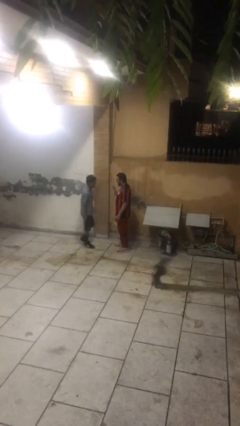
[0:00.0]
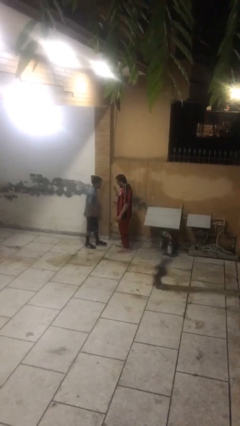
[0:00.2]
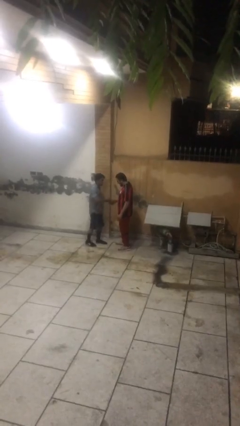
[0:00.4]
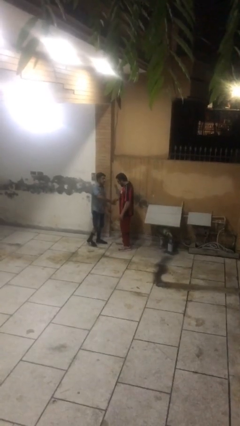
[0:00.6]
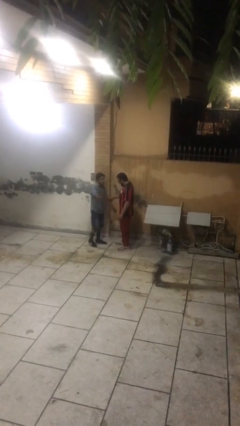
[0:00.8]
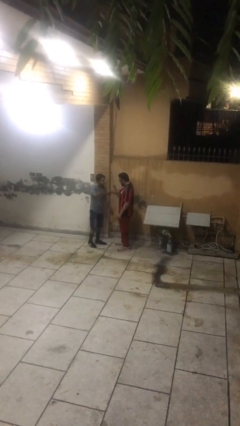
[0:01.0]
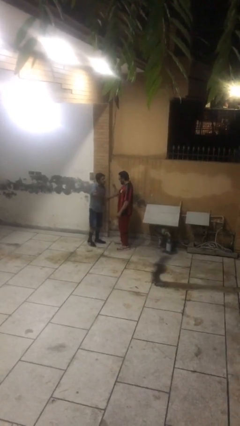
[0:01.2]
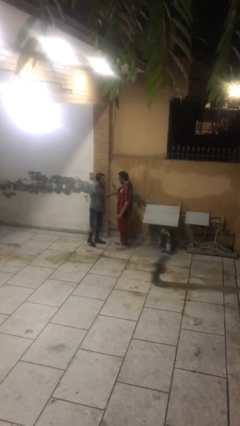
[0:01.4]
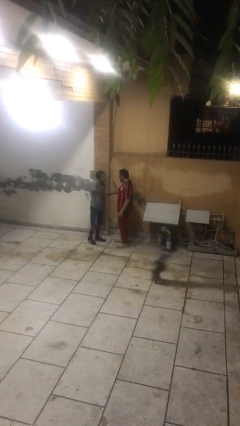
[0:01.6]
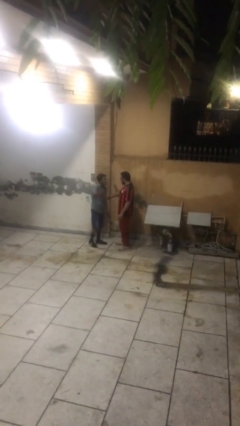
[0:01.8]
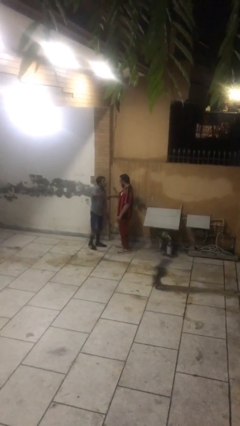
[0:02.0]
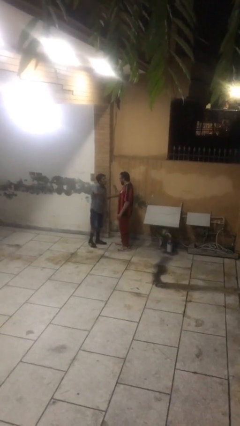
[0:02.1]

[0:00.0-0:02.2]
person shakes hand

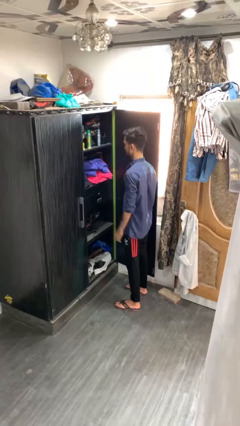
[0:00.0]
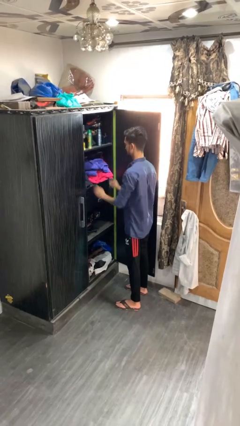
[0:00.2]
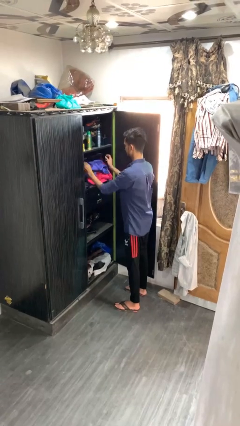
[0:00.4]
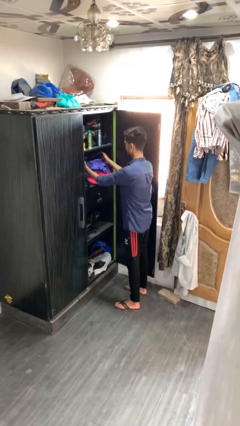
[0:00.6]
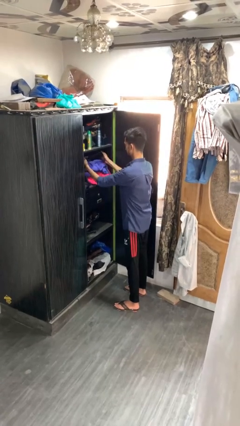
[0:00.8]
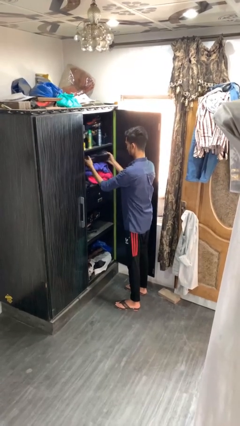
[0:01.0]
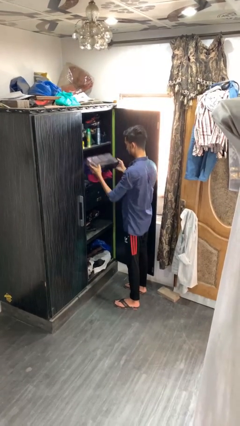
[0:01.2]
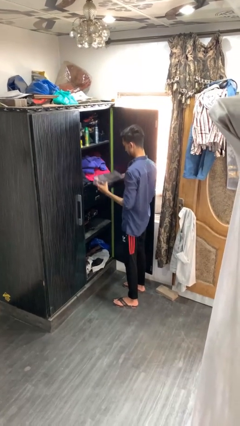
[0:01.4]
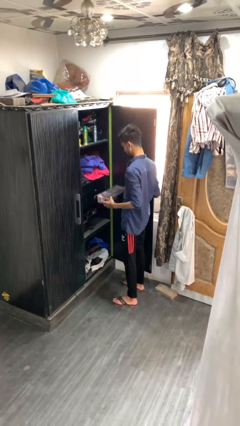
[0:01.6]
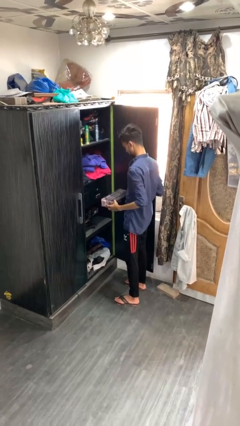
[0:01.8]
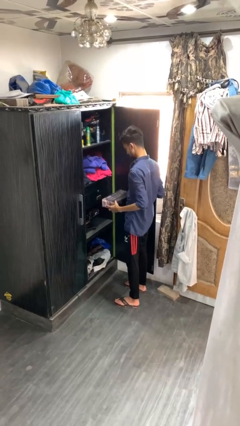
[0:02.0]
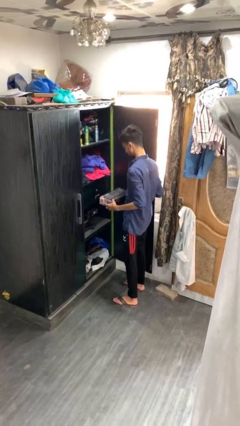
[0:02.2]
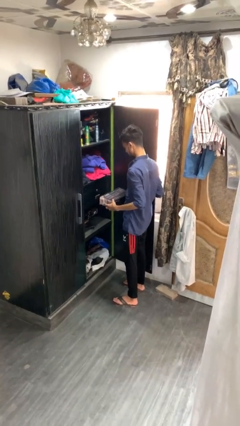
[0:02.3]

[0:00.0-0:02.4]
person picks up object from cabinet

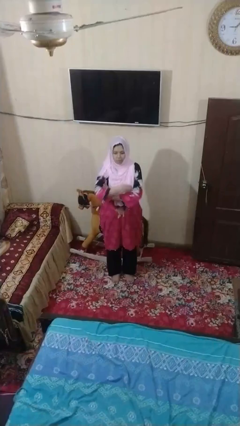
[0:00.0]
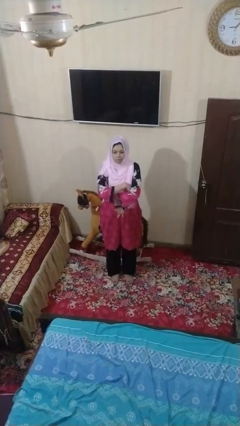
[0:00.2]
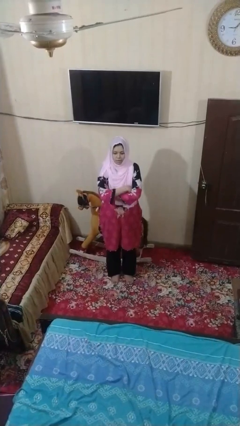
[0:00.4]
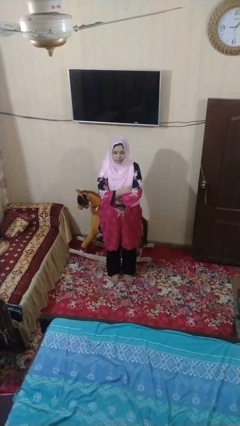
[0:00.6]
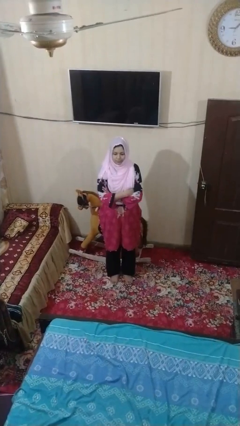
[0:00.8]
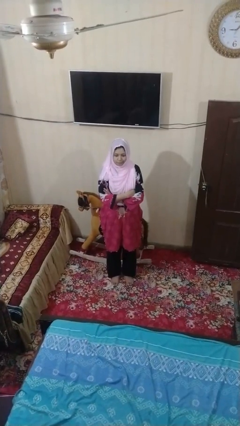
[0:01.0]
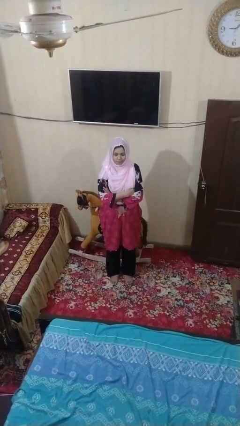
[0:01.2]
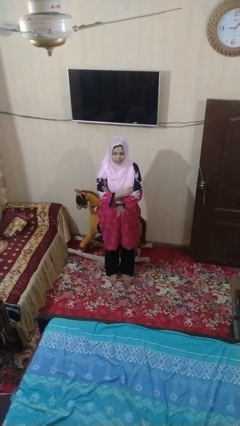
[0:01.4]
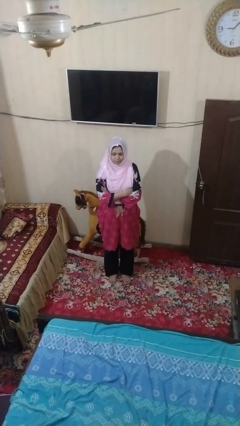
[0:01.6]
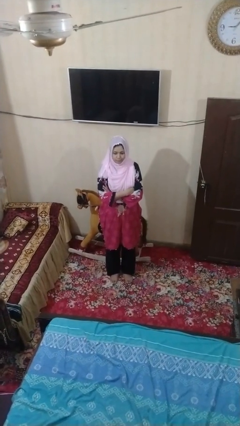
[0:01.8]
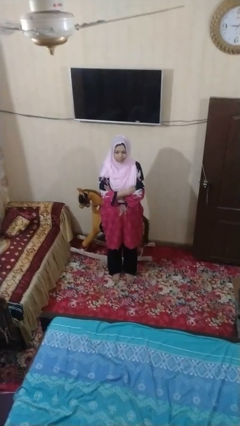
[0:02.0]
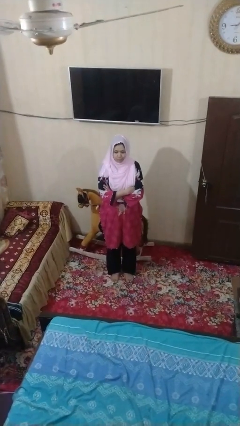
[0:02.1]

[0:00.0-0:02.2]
person crosses arms

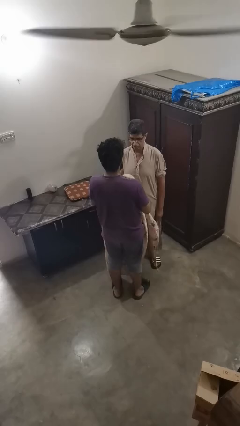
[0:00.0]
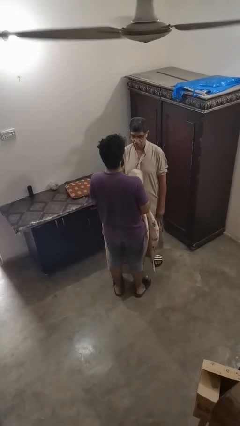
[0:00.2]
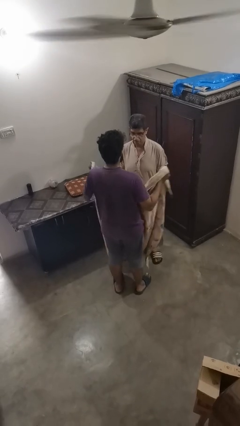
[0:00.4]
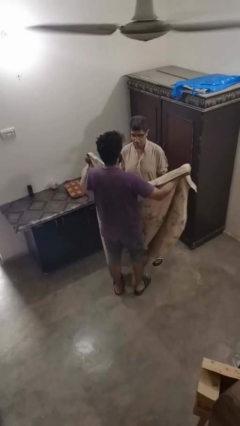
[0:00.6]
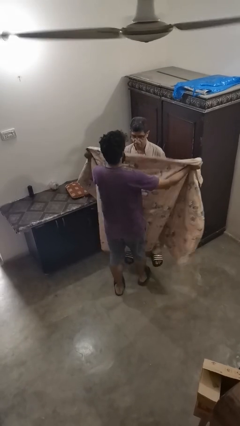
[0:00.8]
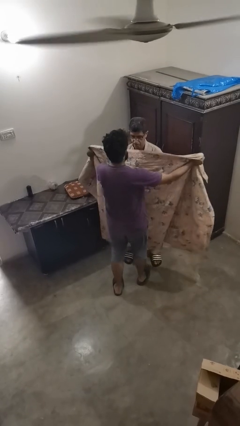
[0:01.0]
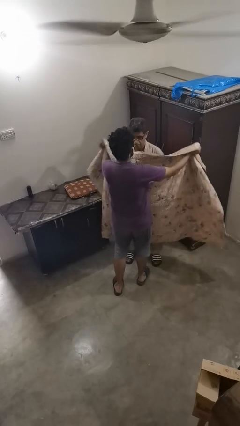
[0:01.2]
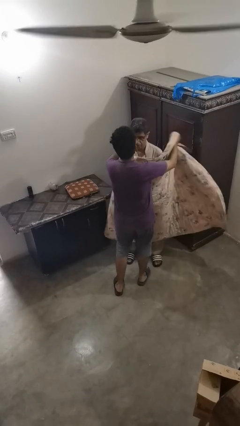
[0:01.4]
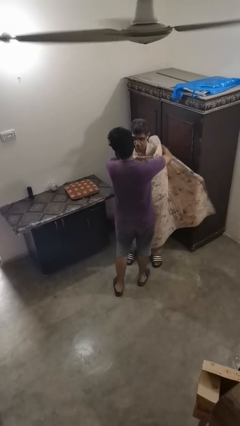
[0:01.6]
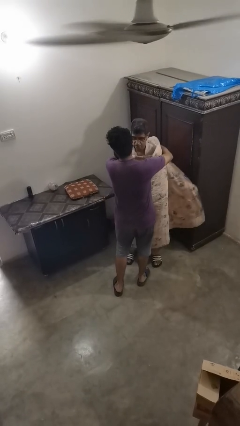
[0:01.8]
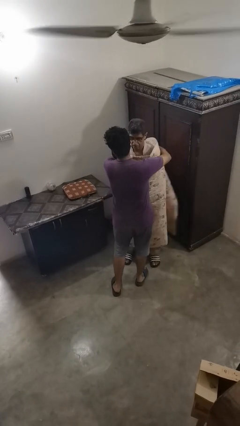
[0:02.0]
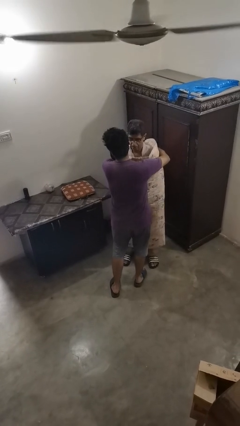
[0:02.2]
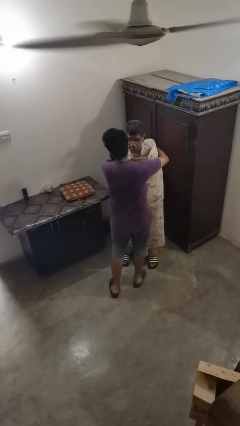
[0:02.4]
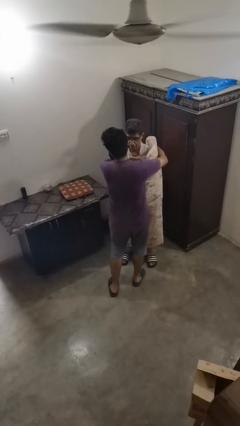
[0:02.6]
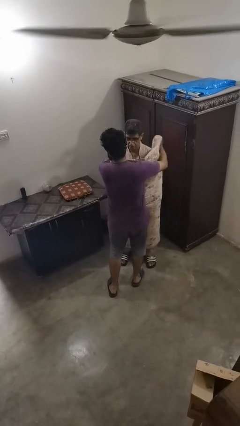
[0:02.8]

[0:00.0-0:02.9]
person covers friend with blanket

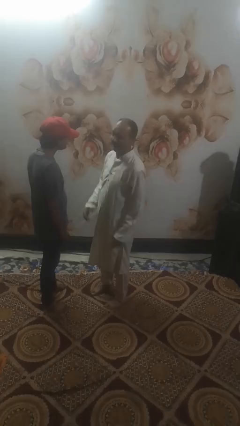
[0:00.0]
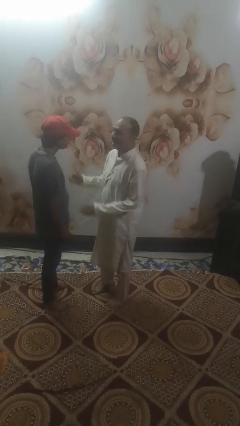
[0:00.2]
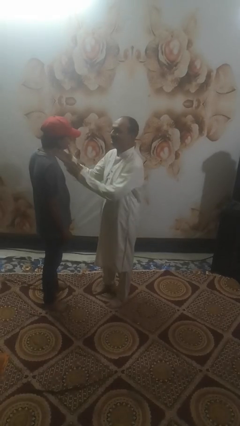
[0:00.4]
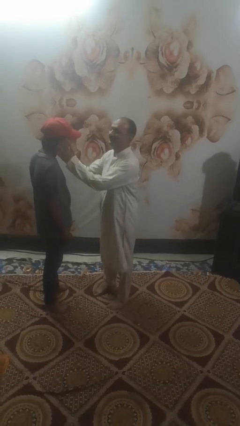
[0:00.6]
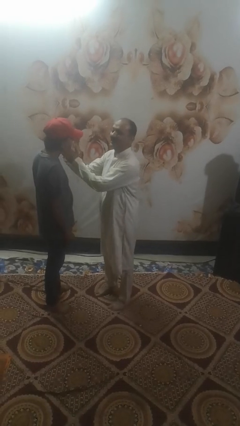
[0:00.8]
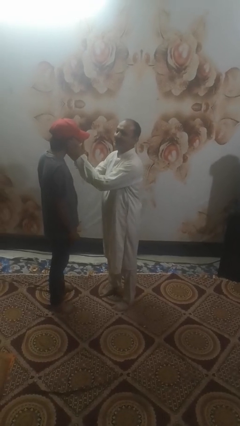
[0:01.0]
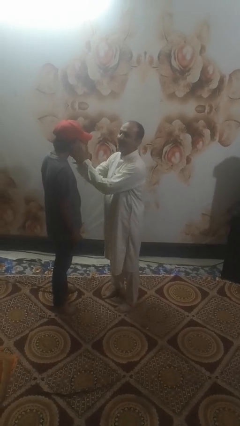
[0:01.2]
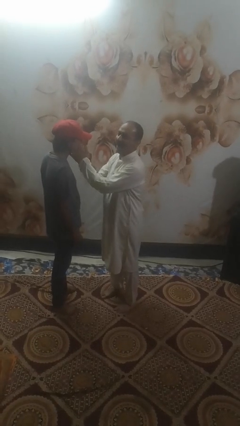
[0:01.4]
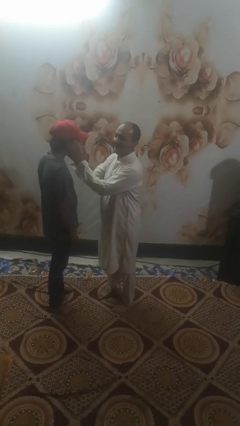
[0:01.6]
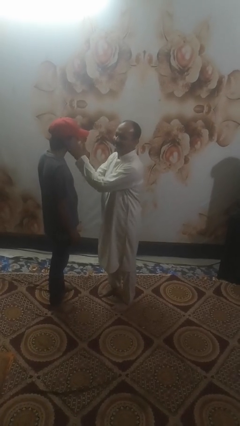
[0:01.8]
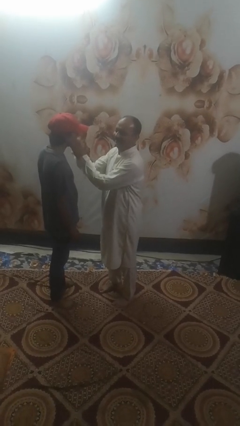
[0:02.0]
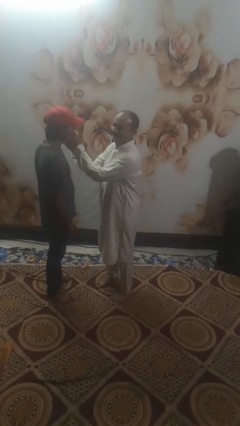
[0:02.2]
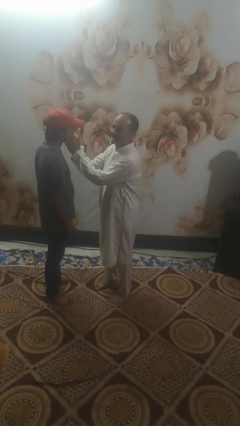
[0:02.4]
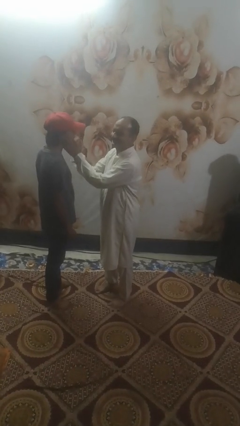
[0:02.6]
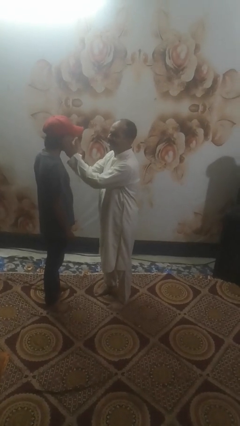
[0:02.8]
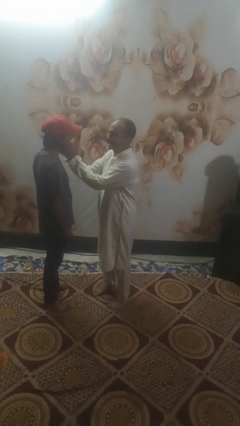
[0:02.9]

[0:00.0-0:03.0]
person touches face of person

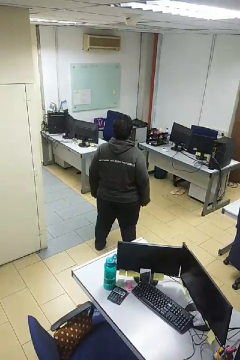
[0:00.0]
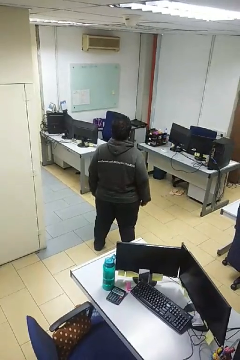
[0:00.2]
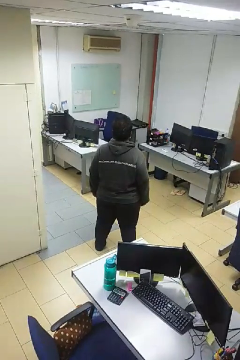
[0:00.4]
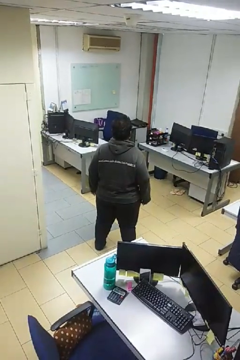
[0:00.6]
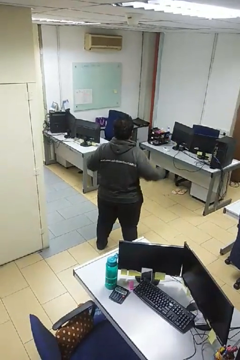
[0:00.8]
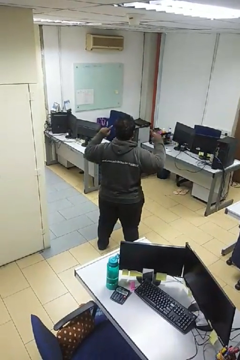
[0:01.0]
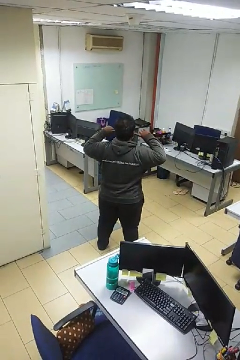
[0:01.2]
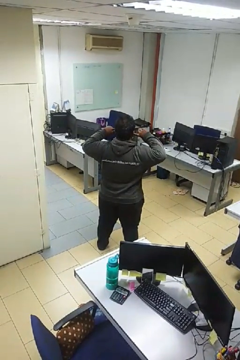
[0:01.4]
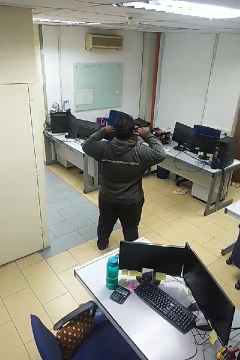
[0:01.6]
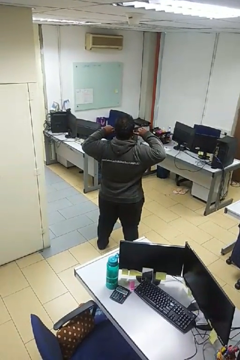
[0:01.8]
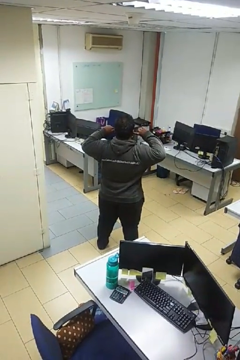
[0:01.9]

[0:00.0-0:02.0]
person puts fingers in ear

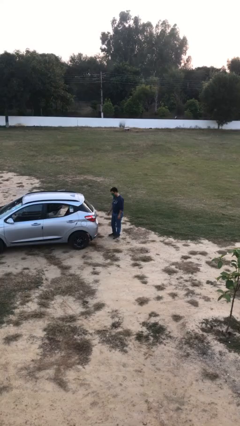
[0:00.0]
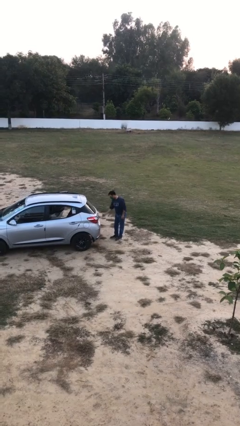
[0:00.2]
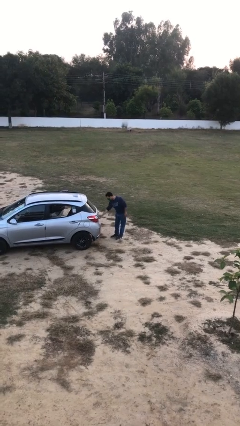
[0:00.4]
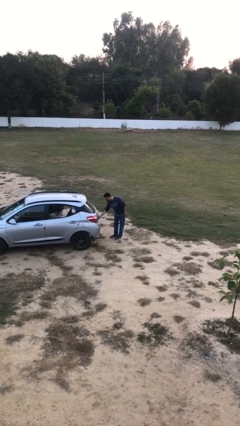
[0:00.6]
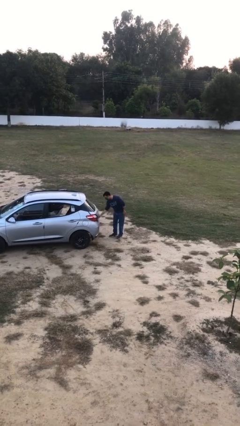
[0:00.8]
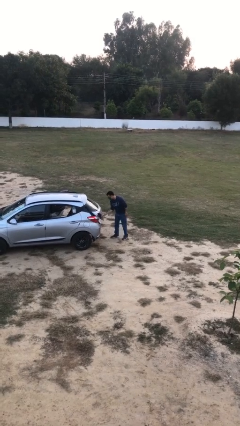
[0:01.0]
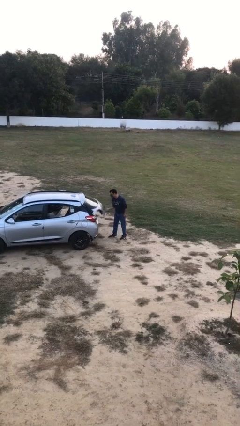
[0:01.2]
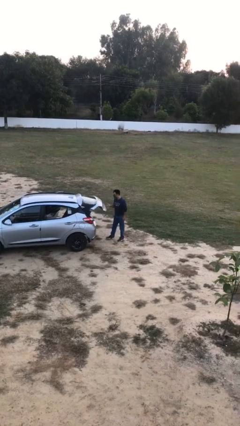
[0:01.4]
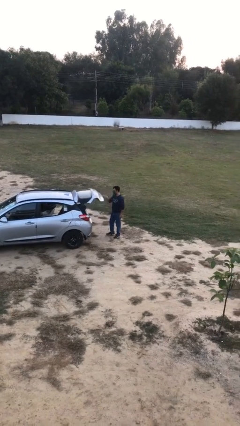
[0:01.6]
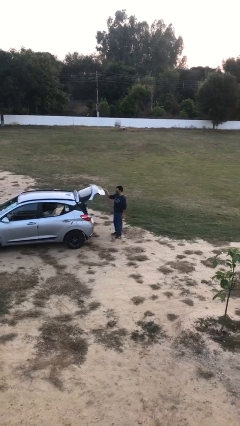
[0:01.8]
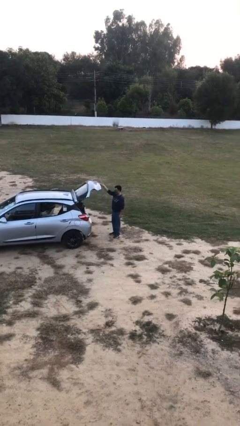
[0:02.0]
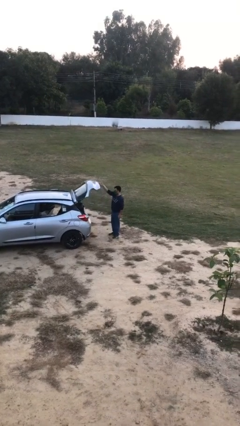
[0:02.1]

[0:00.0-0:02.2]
person opens car trunk

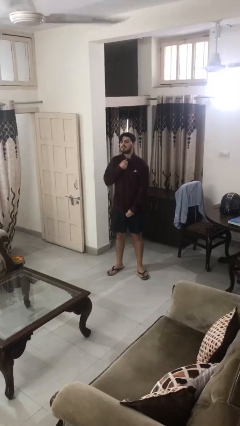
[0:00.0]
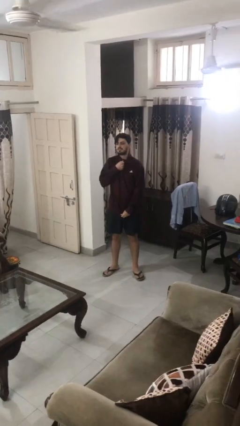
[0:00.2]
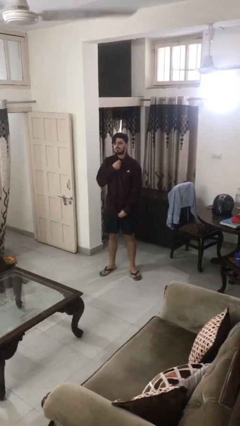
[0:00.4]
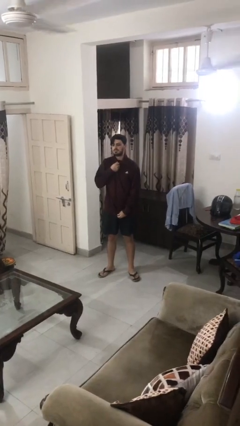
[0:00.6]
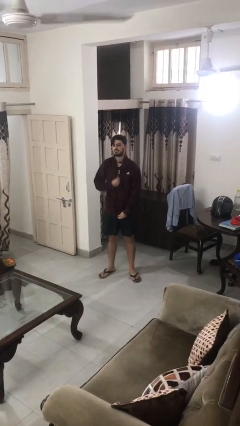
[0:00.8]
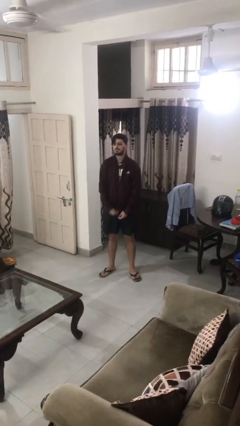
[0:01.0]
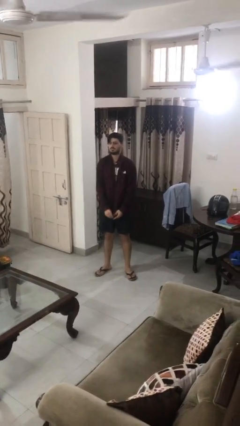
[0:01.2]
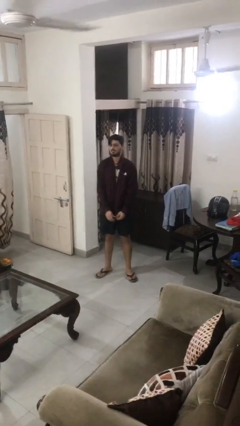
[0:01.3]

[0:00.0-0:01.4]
person unzips jacket
